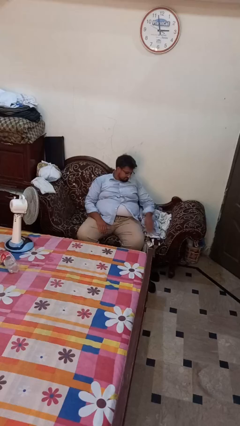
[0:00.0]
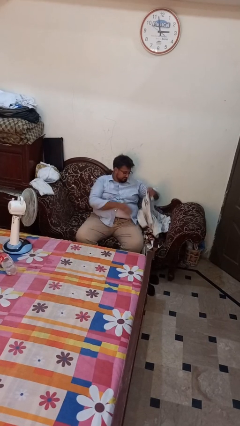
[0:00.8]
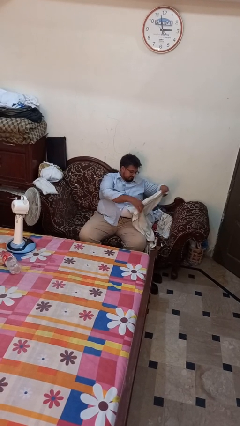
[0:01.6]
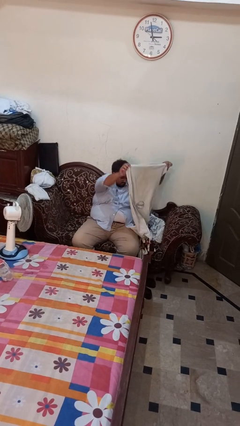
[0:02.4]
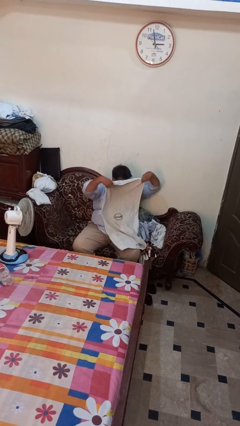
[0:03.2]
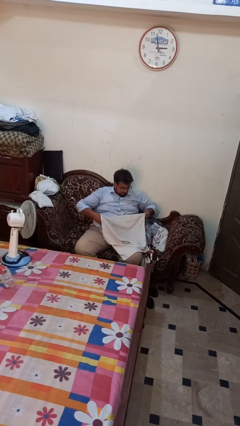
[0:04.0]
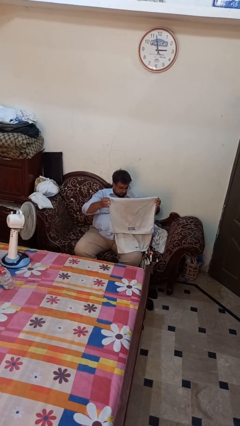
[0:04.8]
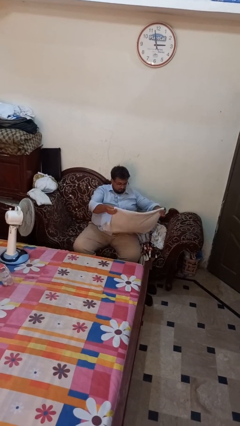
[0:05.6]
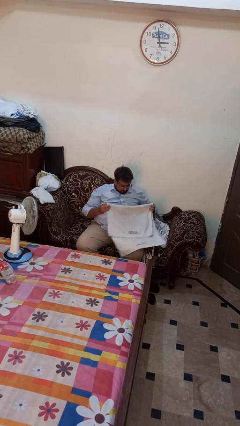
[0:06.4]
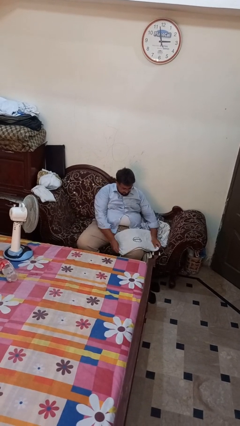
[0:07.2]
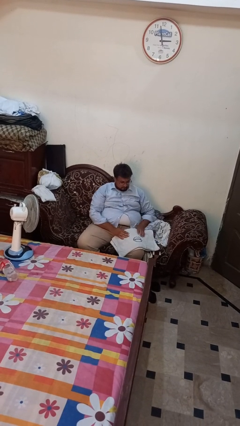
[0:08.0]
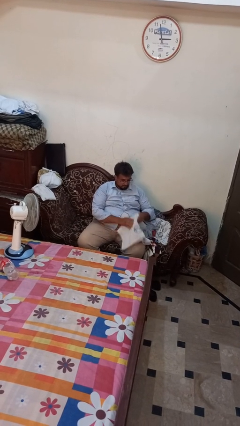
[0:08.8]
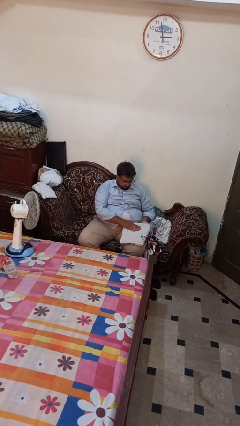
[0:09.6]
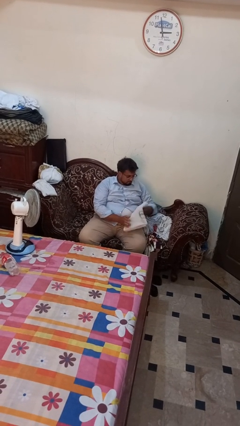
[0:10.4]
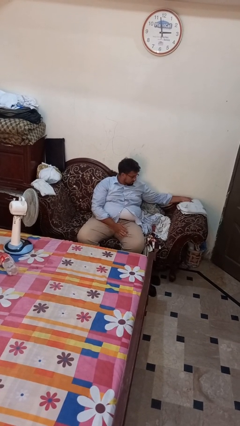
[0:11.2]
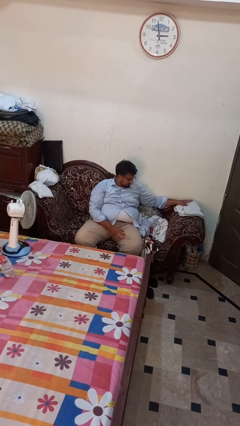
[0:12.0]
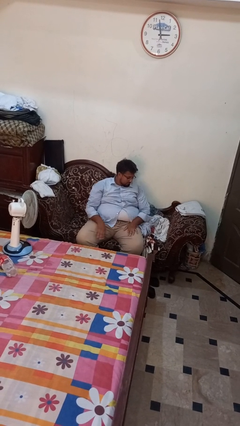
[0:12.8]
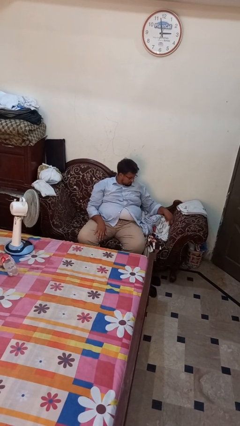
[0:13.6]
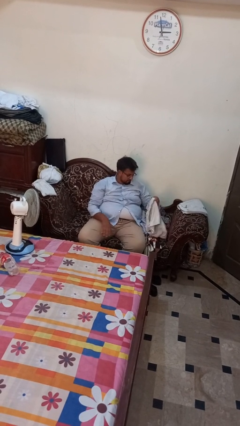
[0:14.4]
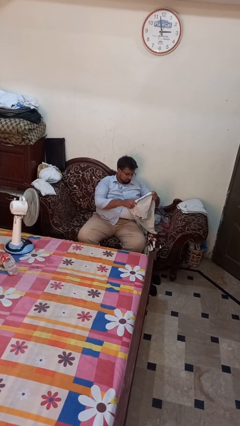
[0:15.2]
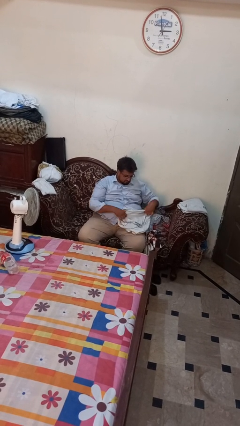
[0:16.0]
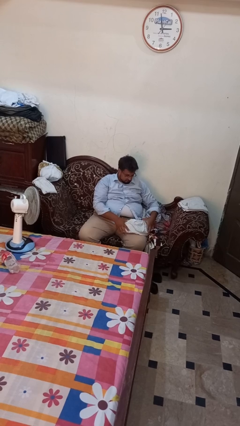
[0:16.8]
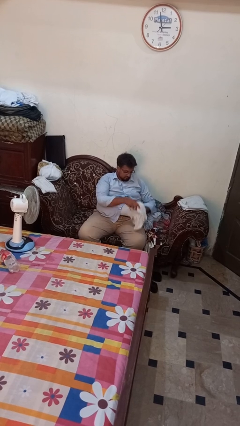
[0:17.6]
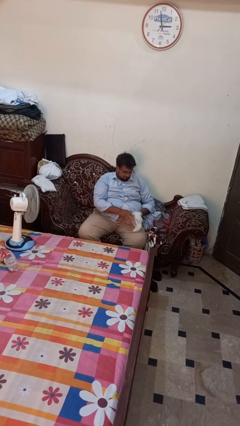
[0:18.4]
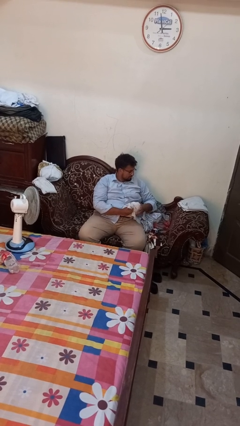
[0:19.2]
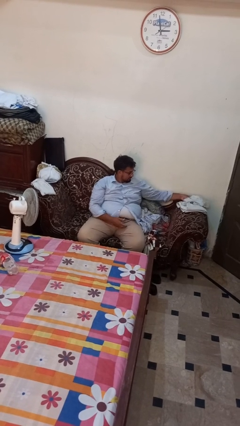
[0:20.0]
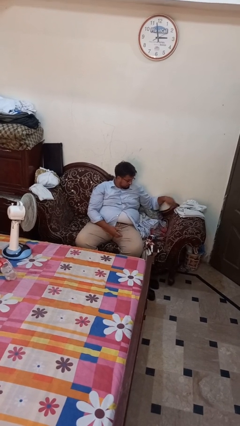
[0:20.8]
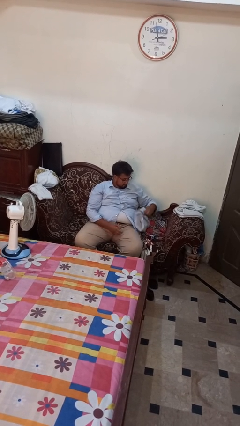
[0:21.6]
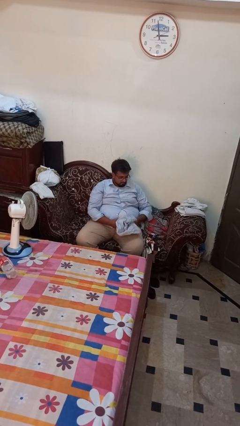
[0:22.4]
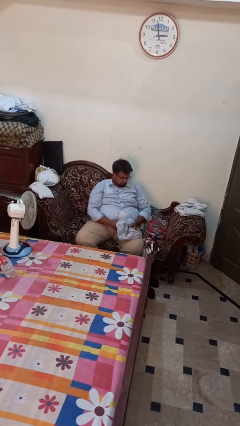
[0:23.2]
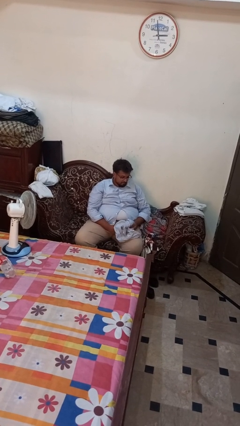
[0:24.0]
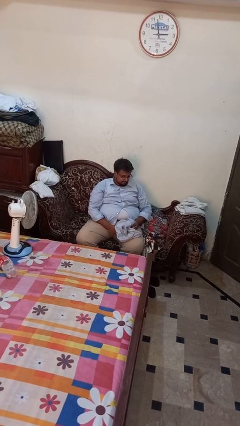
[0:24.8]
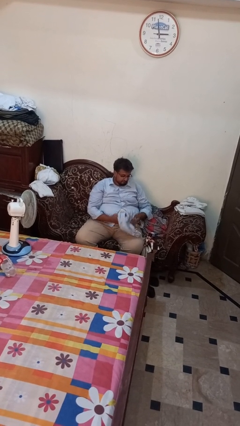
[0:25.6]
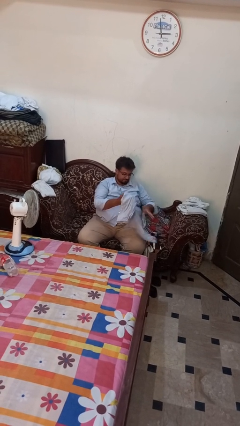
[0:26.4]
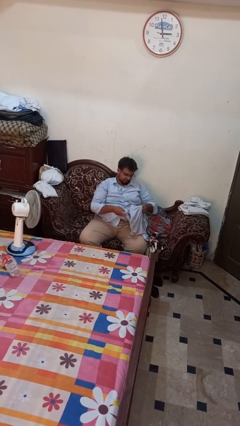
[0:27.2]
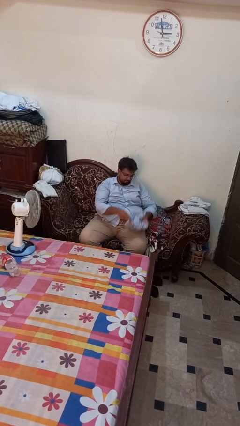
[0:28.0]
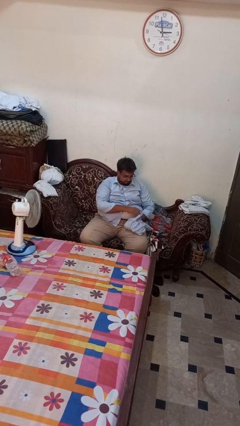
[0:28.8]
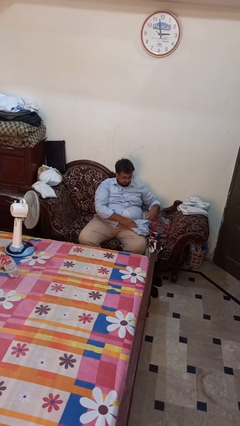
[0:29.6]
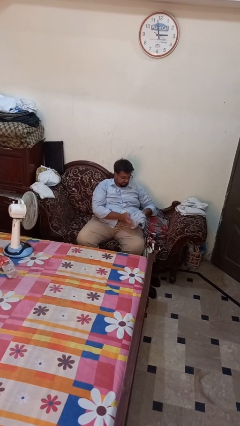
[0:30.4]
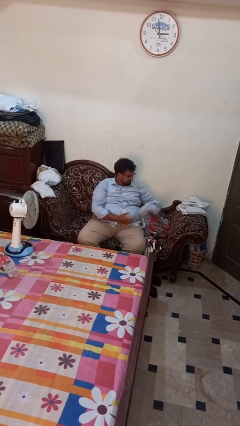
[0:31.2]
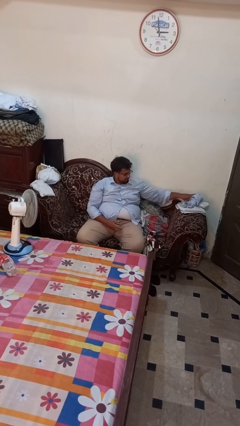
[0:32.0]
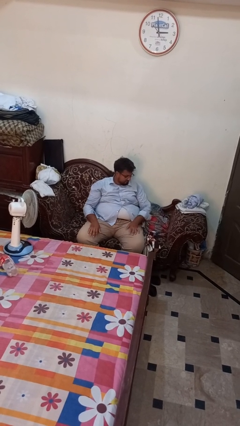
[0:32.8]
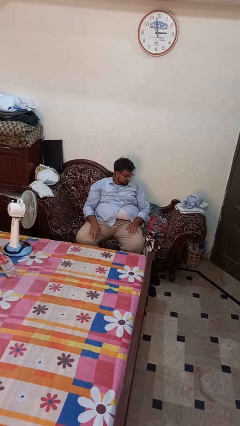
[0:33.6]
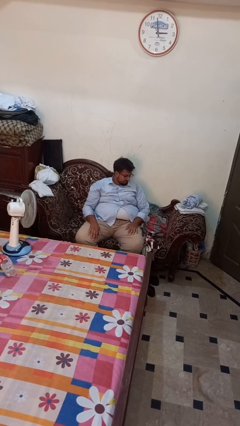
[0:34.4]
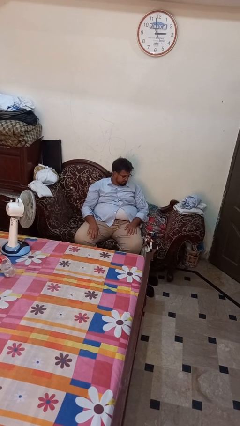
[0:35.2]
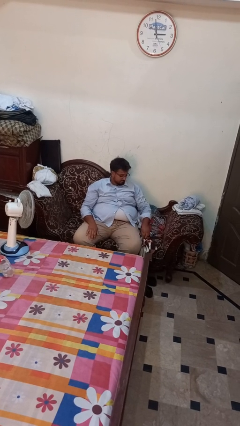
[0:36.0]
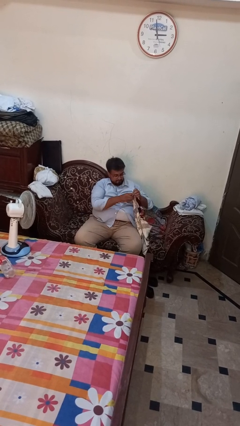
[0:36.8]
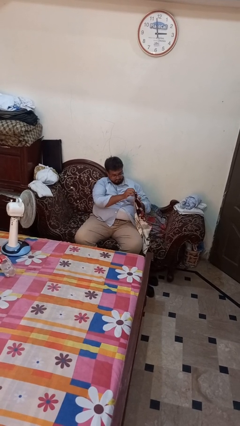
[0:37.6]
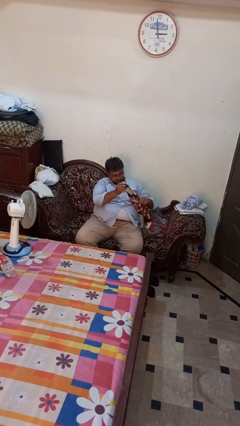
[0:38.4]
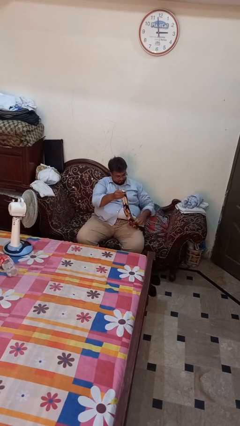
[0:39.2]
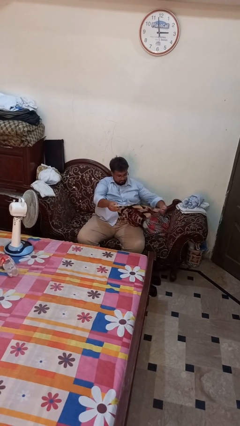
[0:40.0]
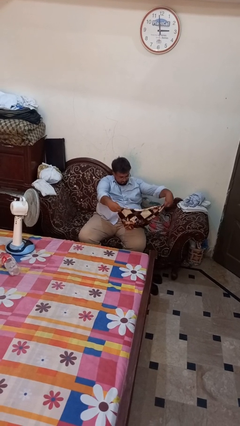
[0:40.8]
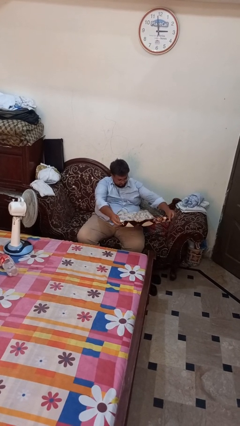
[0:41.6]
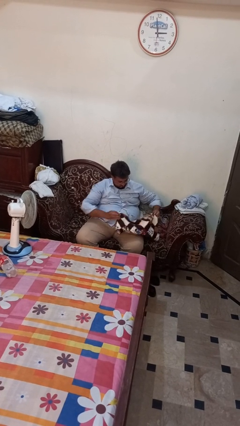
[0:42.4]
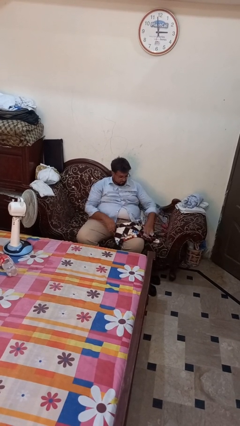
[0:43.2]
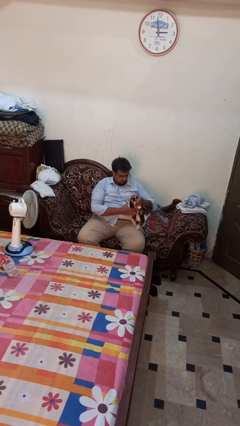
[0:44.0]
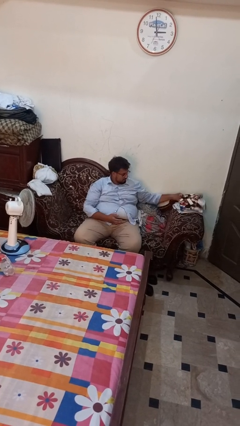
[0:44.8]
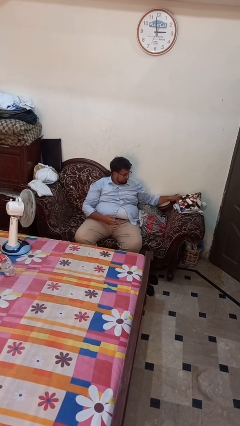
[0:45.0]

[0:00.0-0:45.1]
person folds shirt

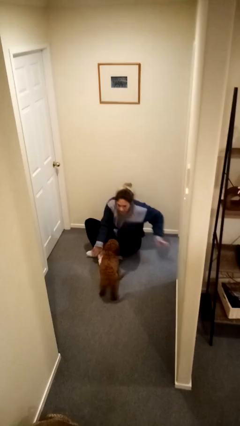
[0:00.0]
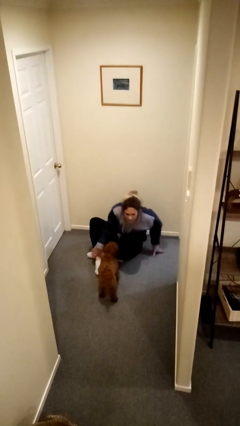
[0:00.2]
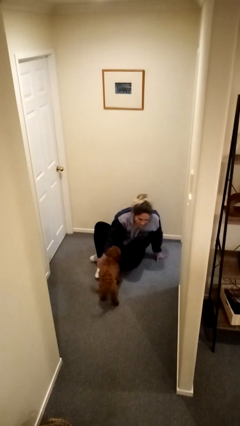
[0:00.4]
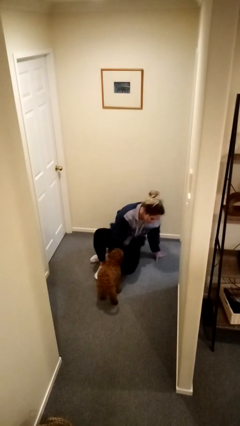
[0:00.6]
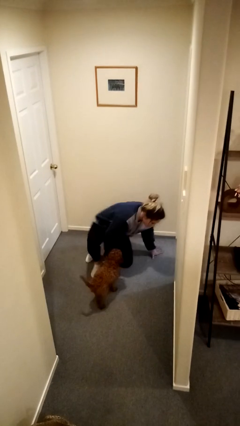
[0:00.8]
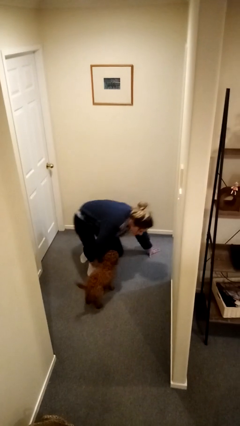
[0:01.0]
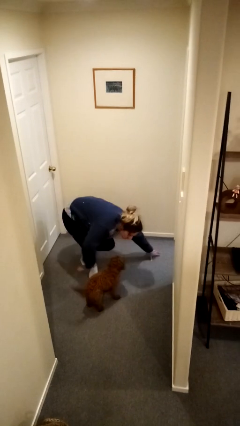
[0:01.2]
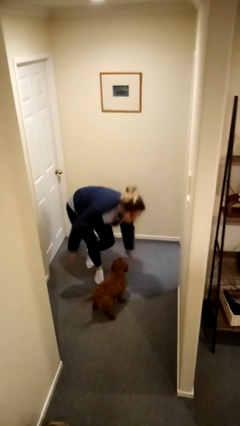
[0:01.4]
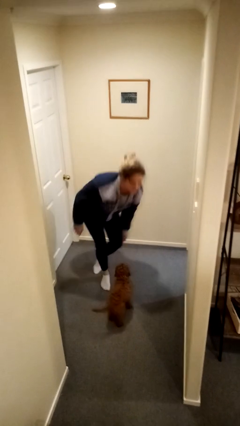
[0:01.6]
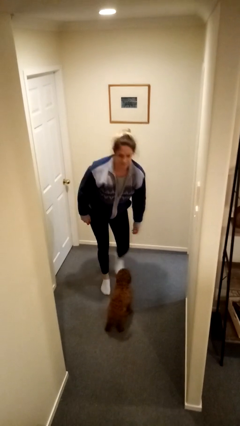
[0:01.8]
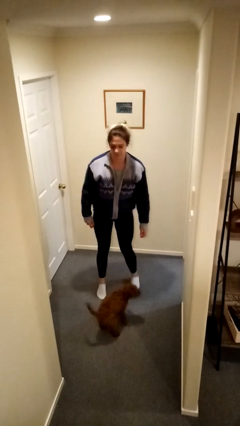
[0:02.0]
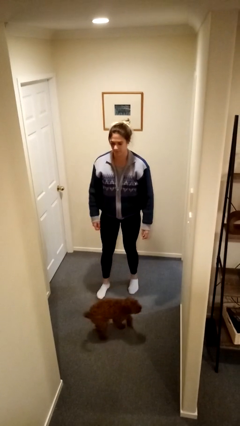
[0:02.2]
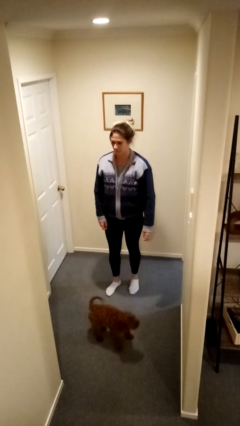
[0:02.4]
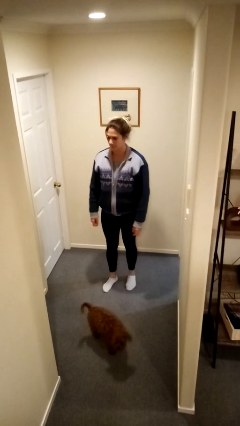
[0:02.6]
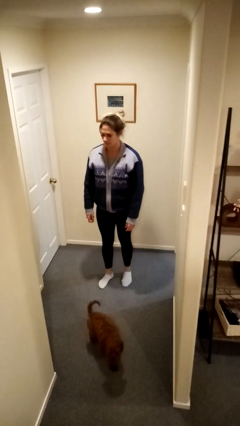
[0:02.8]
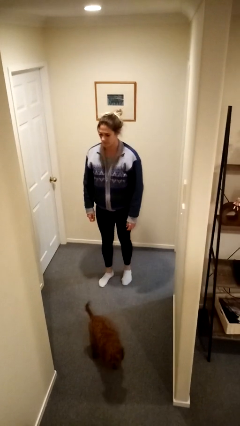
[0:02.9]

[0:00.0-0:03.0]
person stands up from floor

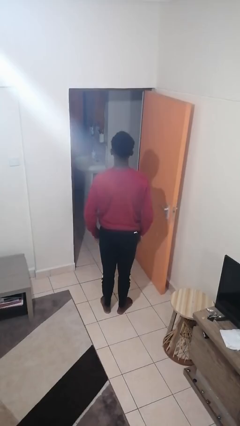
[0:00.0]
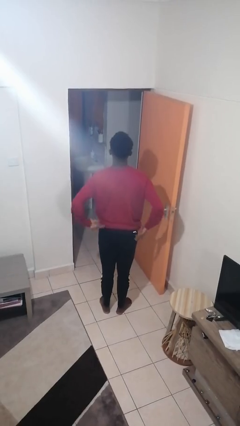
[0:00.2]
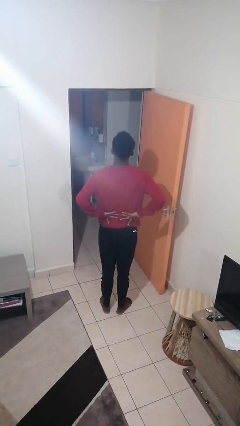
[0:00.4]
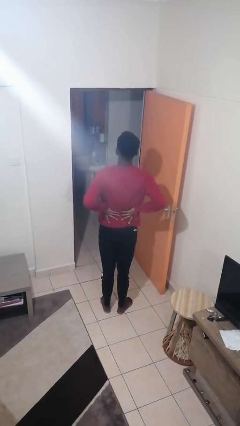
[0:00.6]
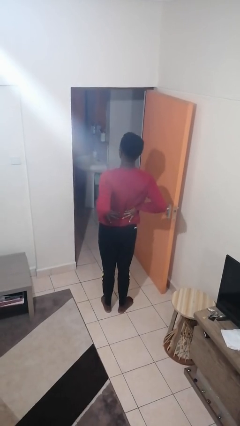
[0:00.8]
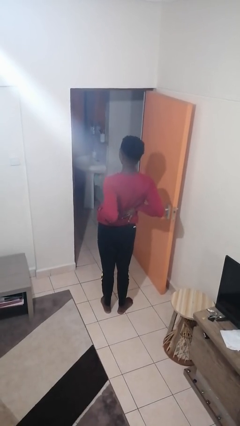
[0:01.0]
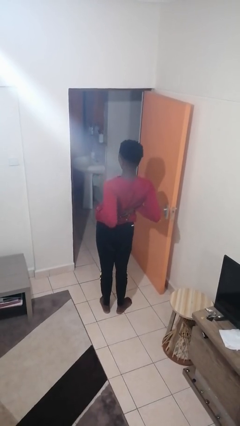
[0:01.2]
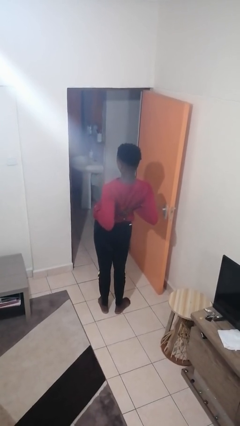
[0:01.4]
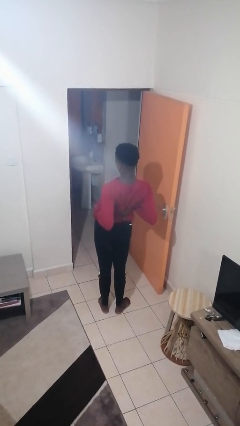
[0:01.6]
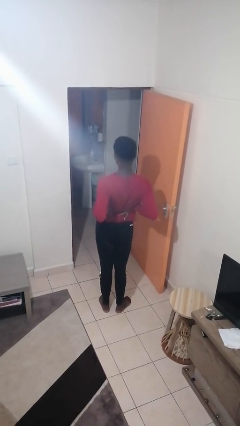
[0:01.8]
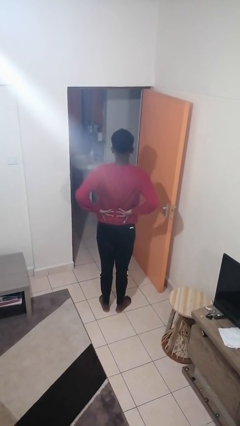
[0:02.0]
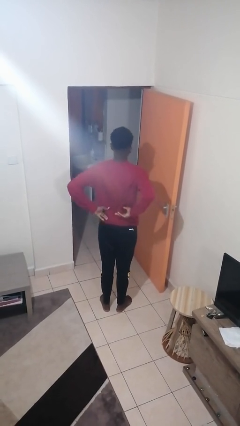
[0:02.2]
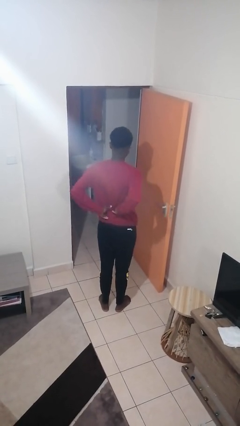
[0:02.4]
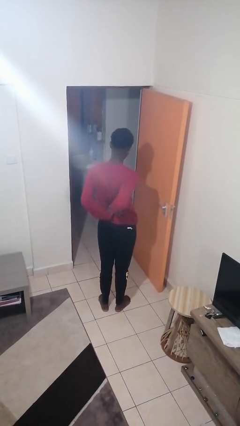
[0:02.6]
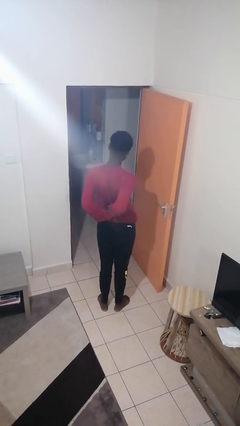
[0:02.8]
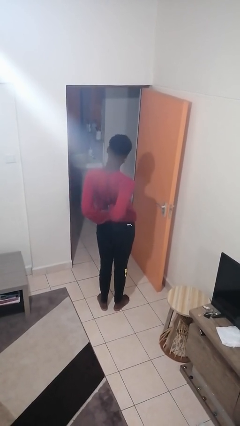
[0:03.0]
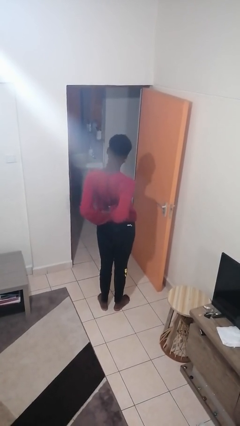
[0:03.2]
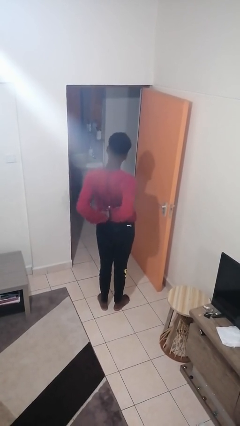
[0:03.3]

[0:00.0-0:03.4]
person stretches back

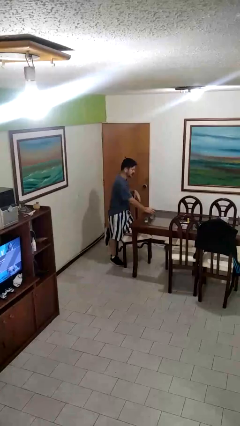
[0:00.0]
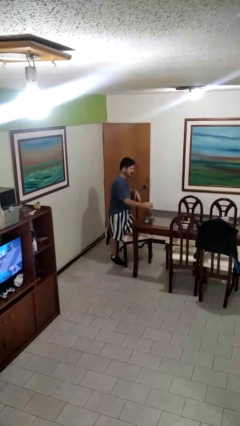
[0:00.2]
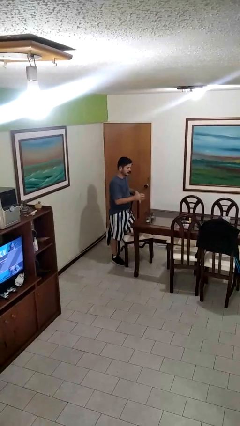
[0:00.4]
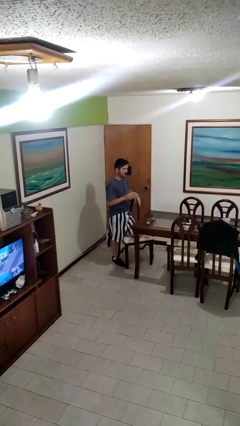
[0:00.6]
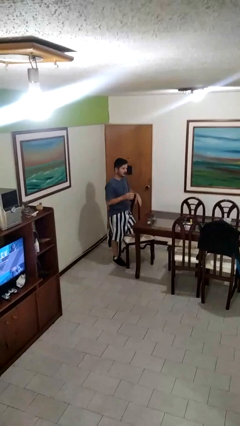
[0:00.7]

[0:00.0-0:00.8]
person picks up object from table
